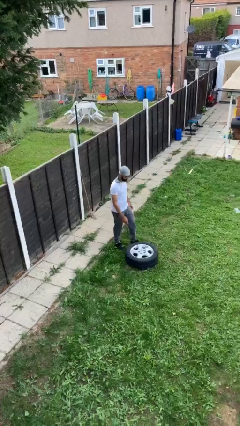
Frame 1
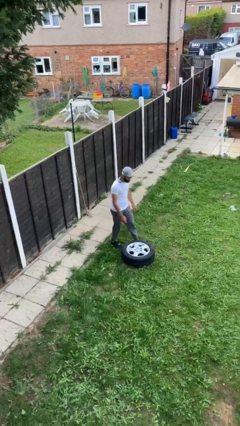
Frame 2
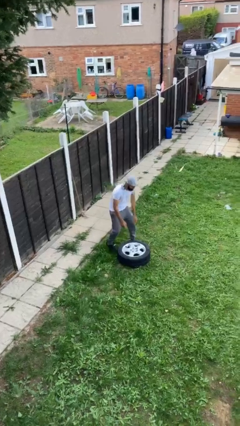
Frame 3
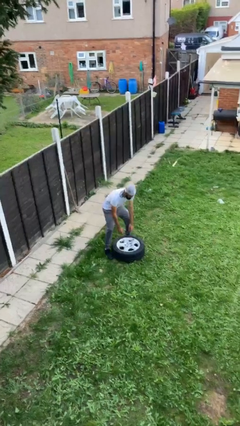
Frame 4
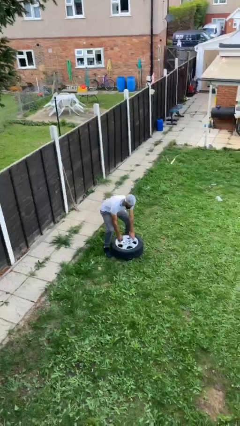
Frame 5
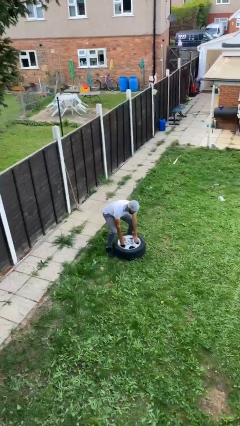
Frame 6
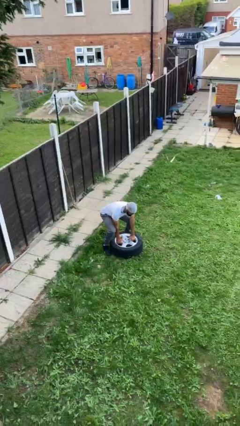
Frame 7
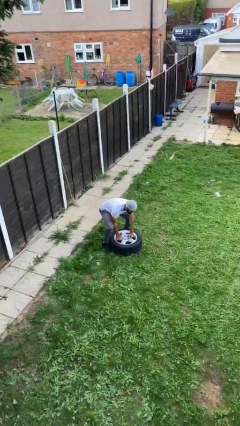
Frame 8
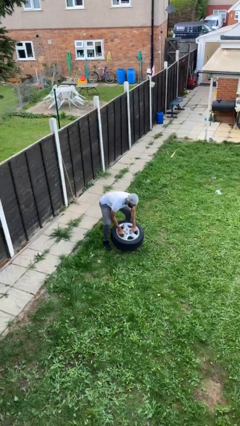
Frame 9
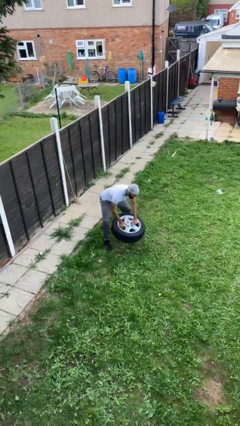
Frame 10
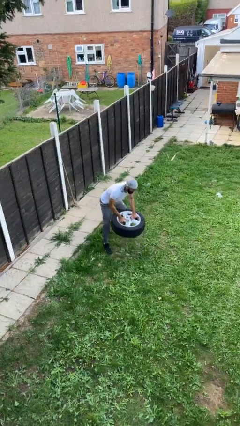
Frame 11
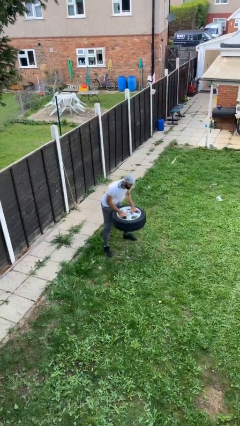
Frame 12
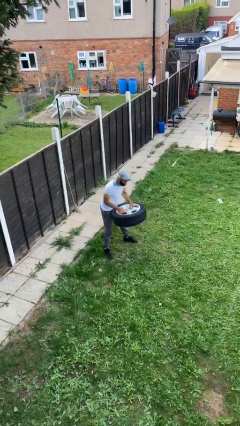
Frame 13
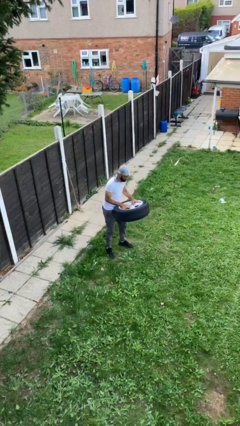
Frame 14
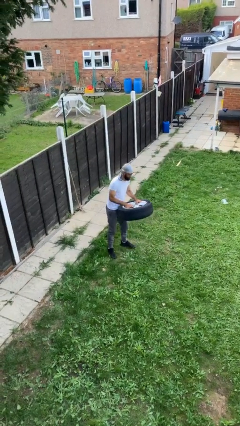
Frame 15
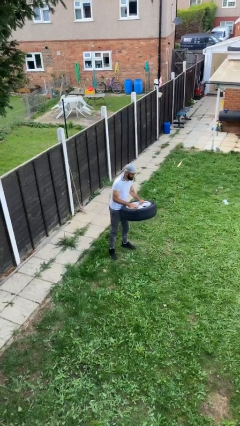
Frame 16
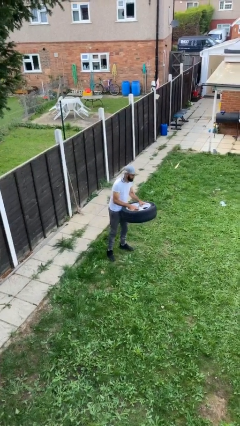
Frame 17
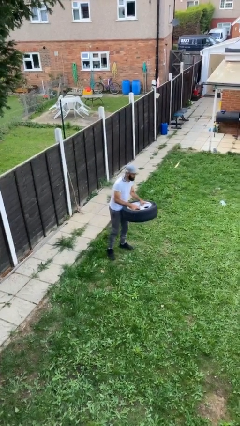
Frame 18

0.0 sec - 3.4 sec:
person picks up object from floor

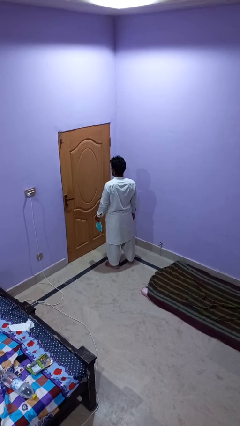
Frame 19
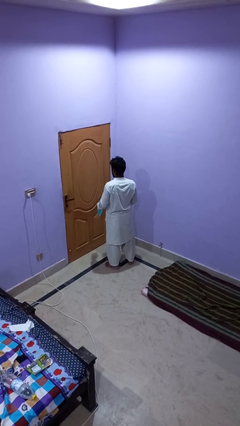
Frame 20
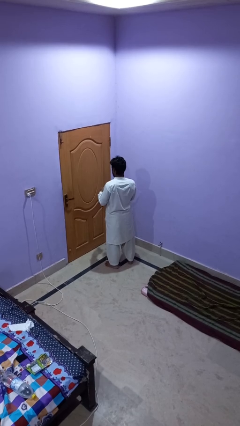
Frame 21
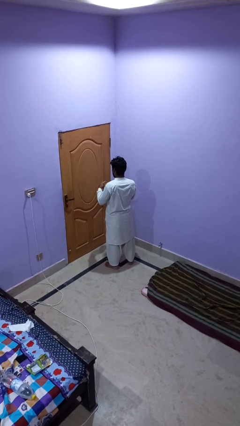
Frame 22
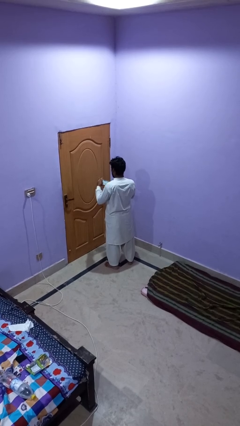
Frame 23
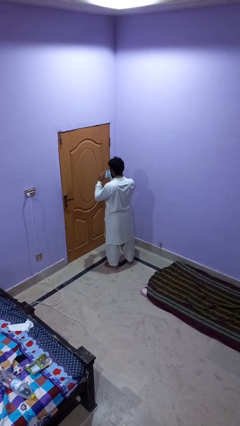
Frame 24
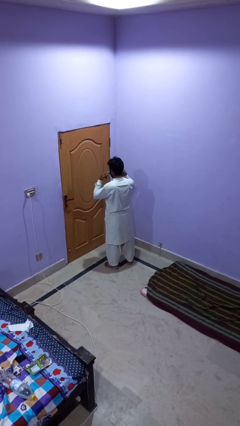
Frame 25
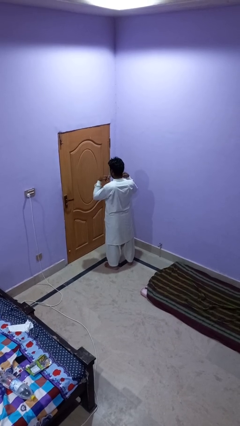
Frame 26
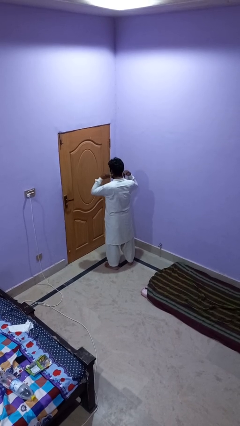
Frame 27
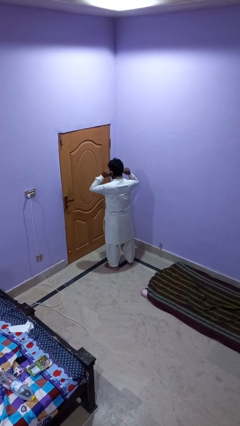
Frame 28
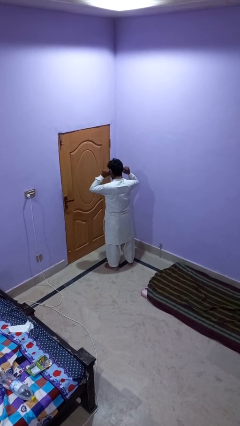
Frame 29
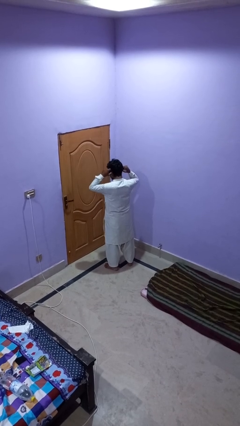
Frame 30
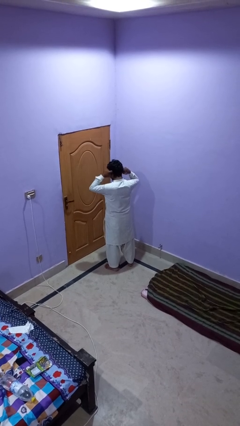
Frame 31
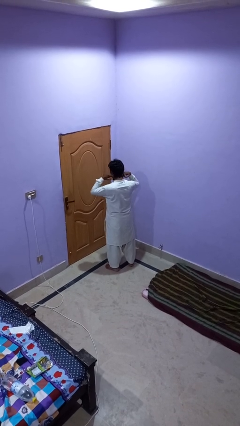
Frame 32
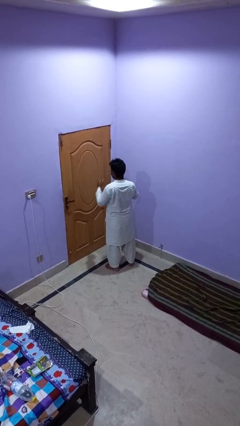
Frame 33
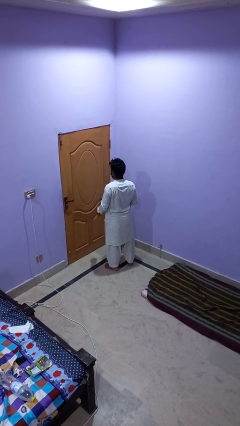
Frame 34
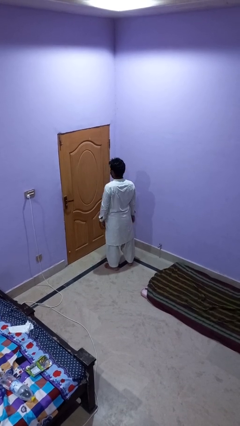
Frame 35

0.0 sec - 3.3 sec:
person puts on facemask

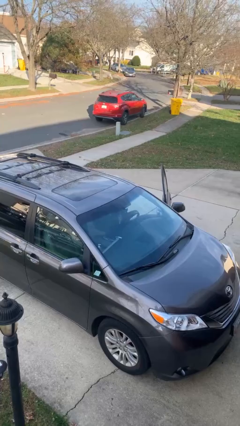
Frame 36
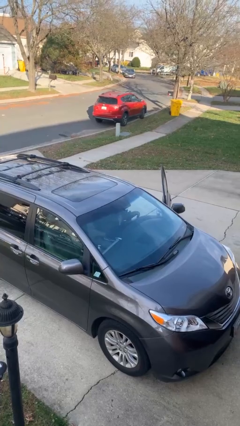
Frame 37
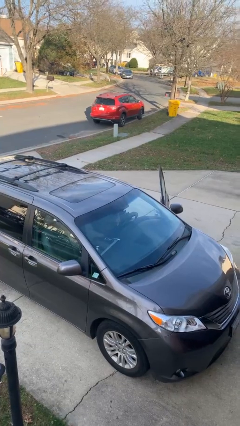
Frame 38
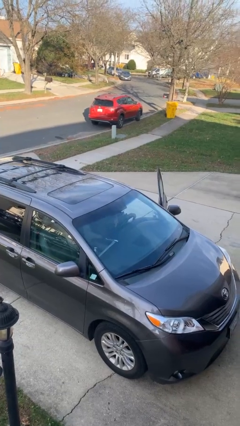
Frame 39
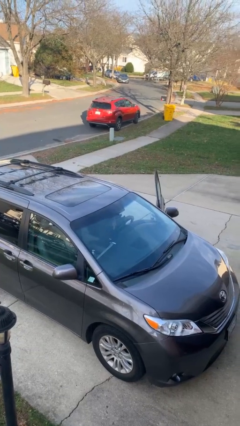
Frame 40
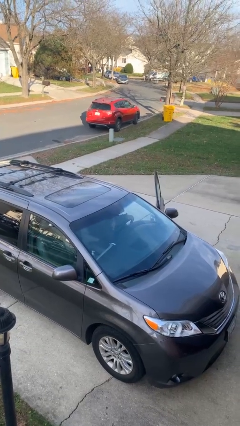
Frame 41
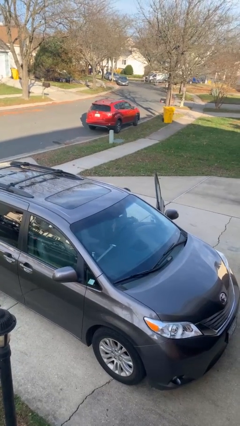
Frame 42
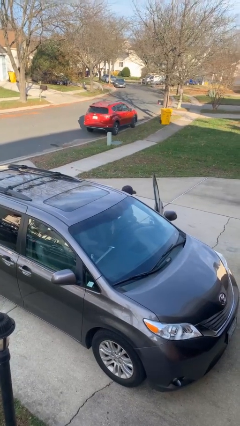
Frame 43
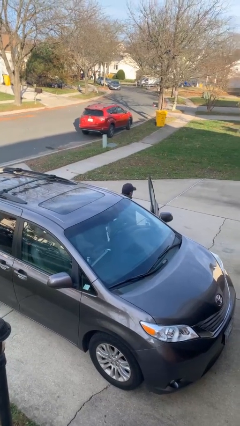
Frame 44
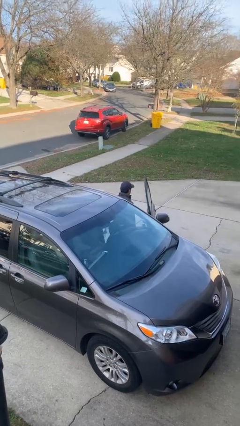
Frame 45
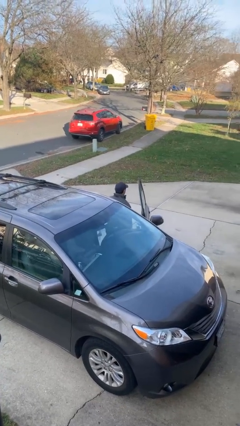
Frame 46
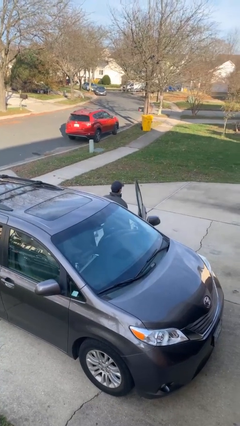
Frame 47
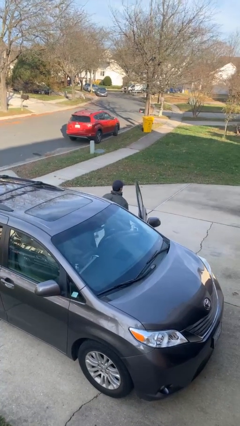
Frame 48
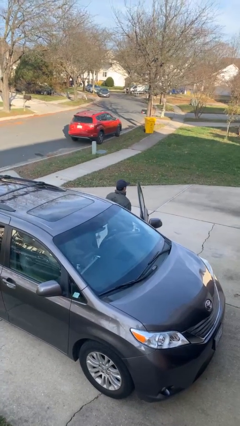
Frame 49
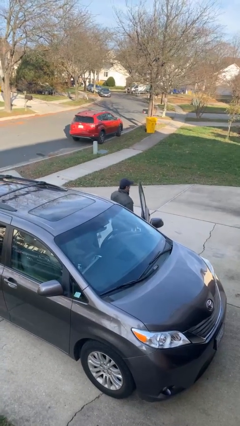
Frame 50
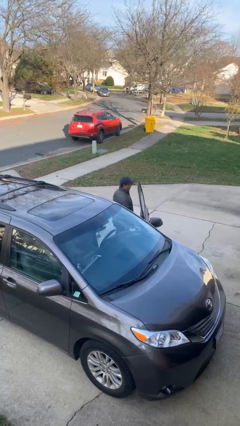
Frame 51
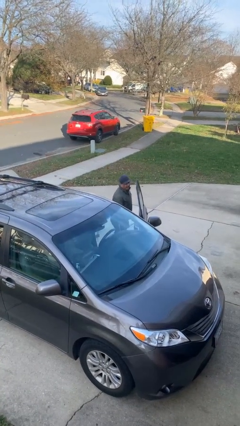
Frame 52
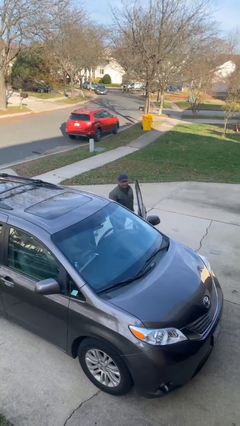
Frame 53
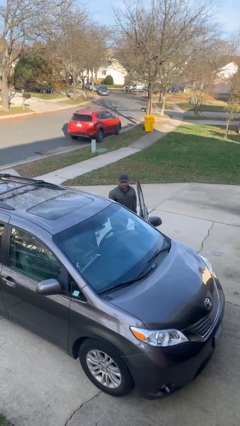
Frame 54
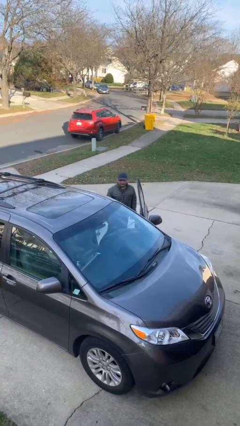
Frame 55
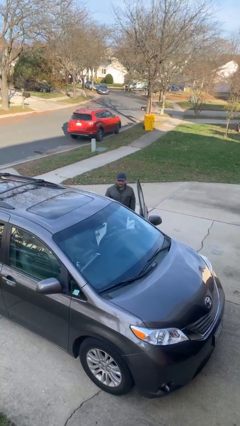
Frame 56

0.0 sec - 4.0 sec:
person exits car

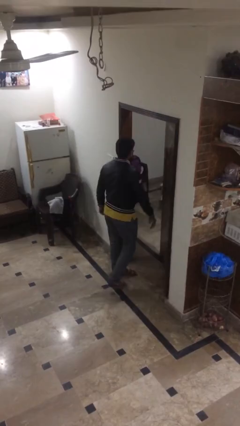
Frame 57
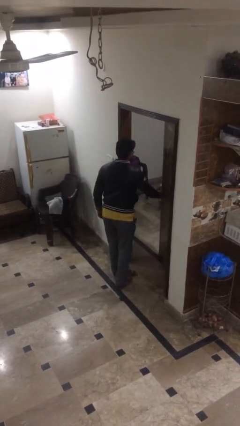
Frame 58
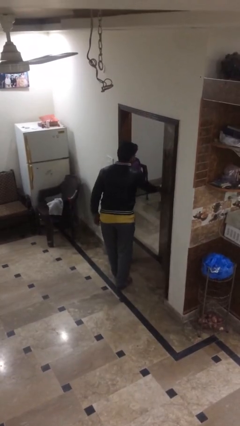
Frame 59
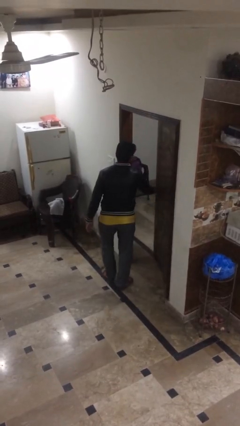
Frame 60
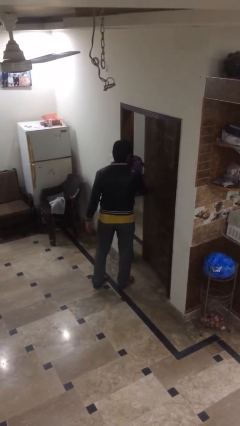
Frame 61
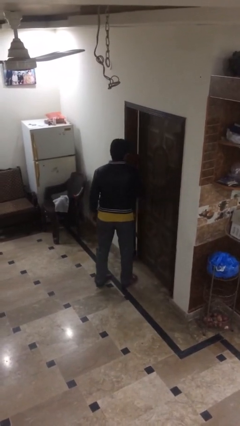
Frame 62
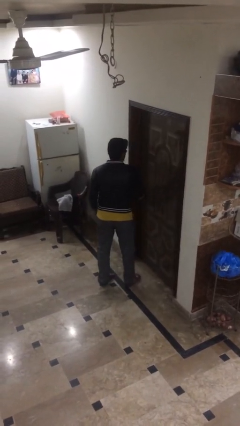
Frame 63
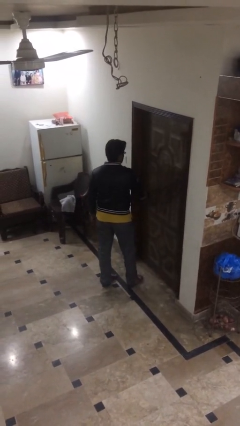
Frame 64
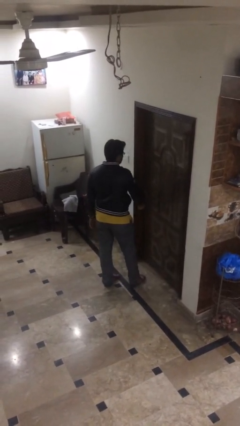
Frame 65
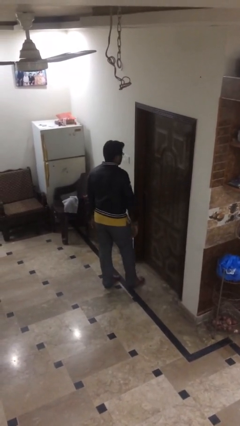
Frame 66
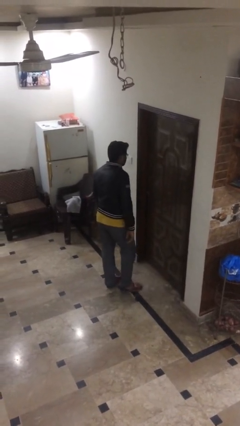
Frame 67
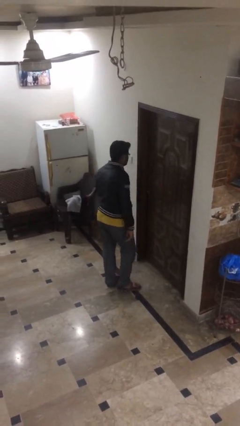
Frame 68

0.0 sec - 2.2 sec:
person closes facility door

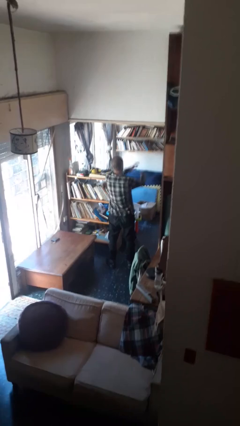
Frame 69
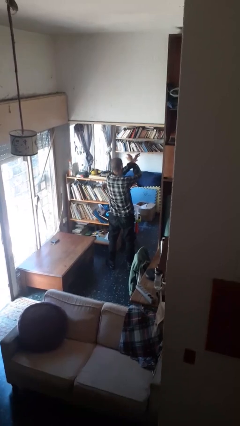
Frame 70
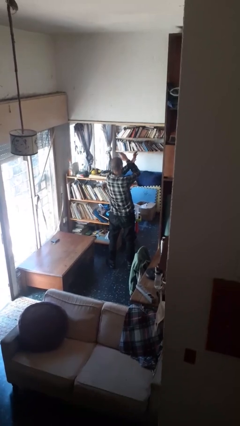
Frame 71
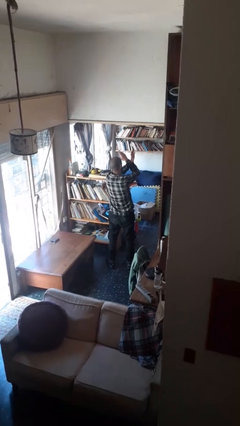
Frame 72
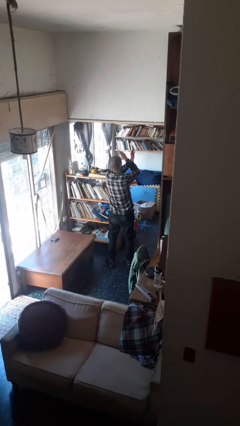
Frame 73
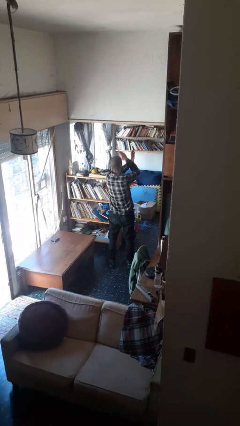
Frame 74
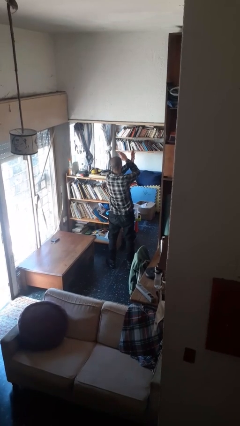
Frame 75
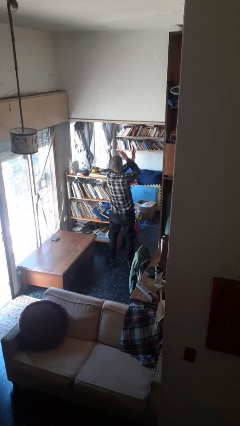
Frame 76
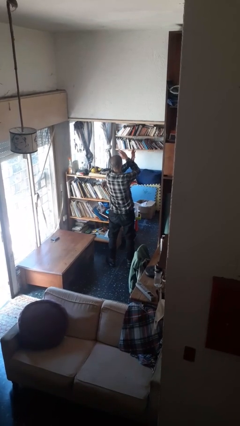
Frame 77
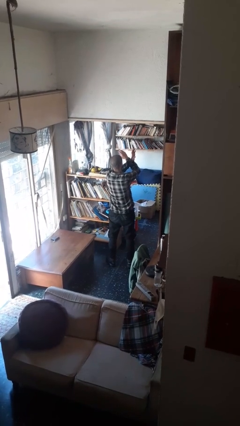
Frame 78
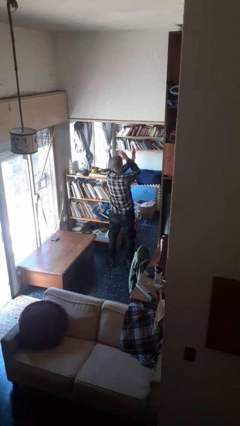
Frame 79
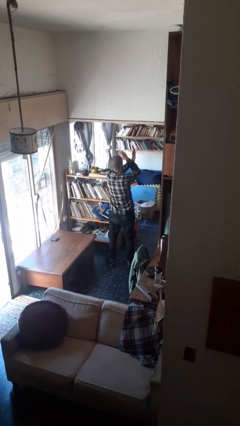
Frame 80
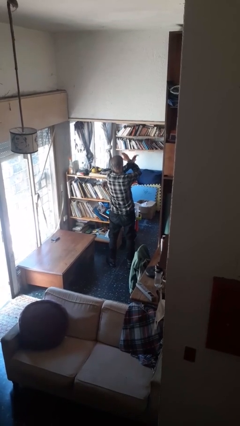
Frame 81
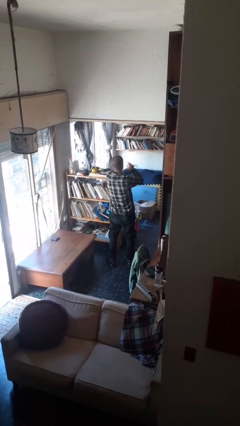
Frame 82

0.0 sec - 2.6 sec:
person gestures arms x

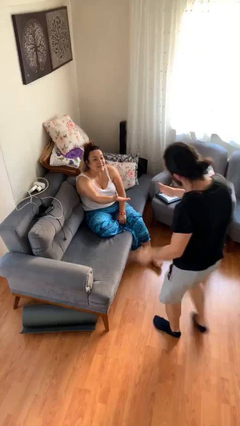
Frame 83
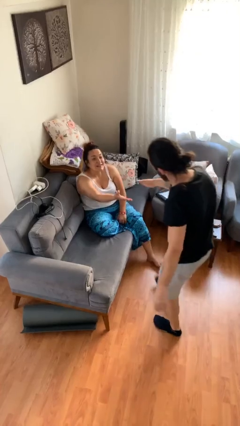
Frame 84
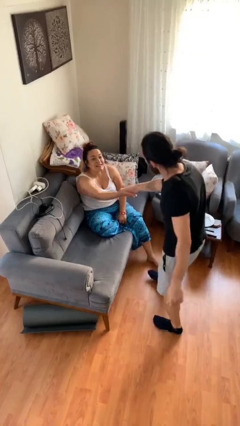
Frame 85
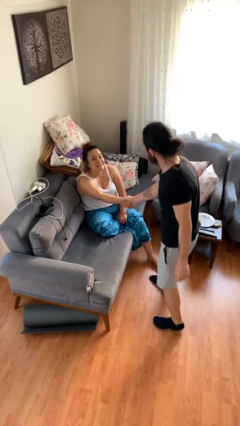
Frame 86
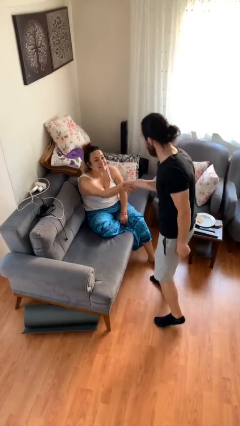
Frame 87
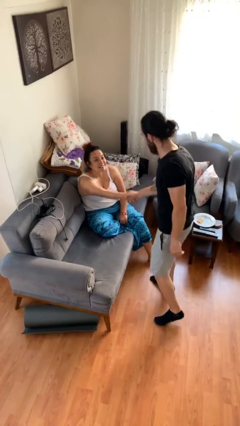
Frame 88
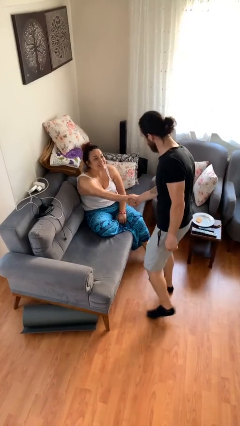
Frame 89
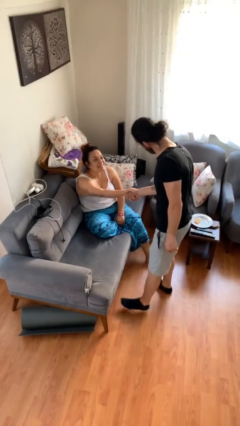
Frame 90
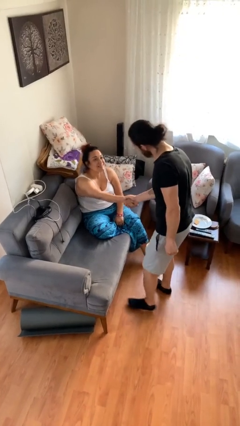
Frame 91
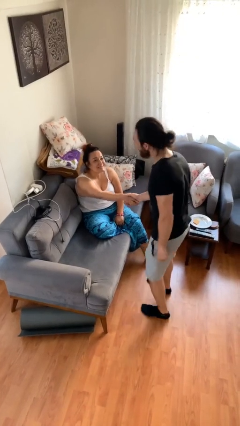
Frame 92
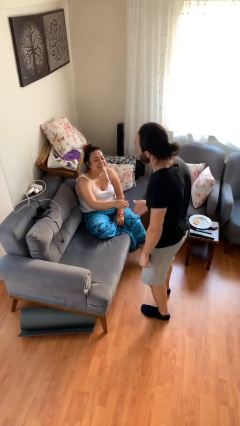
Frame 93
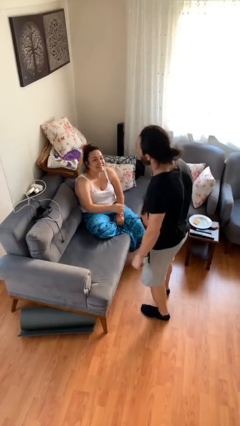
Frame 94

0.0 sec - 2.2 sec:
person shakes hand
